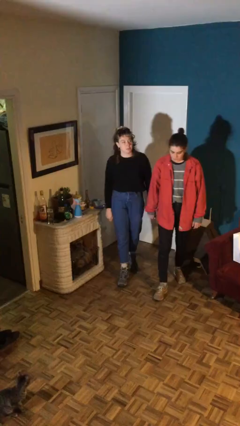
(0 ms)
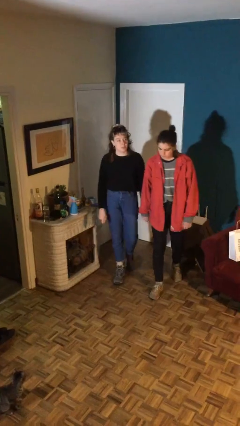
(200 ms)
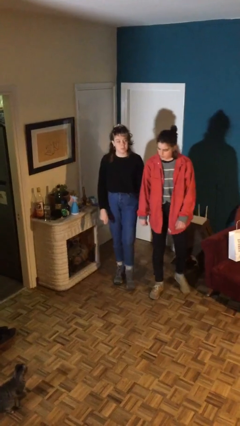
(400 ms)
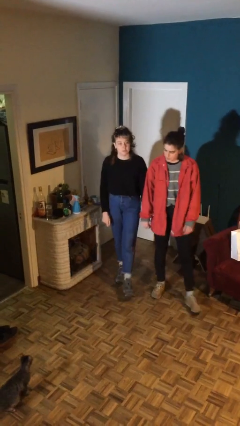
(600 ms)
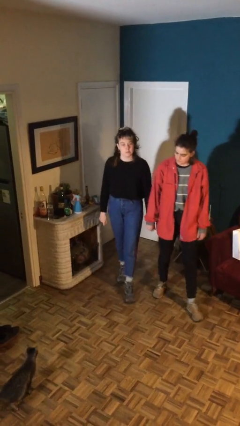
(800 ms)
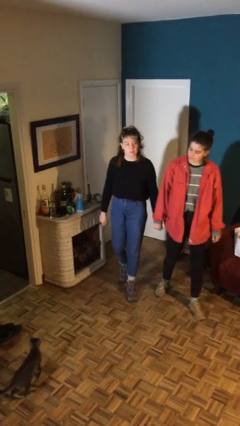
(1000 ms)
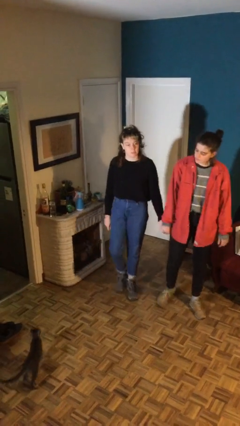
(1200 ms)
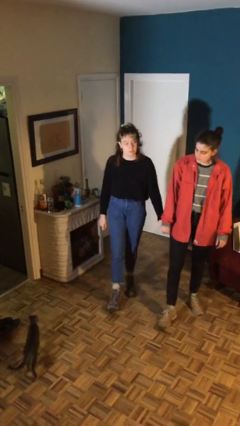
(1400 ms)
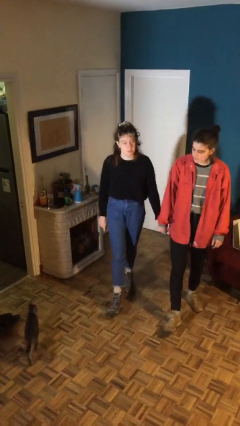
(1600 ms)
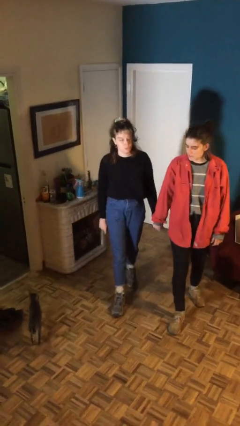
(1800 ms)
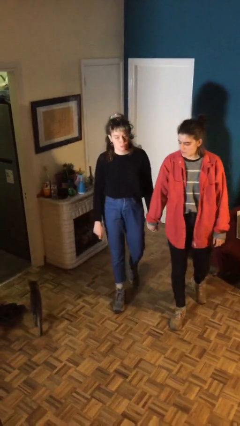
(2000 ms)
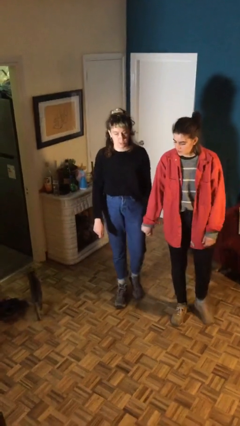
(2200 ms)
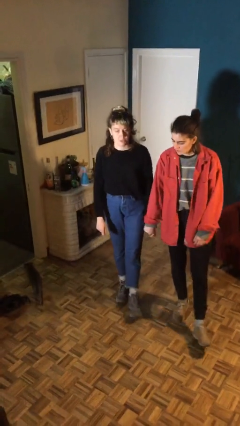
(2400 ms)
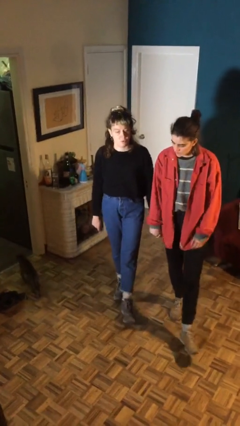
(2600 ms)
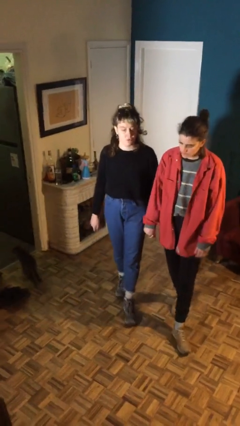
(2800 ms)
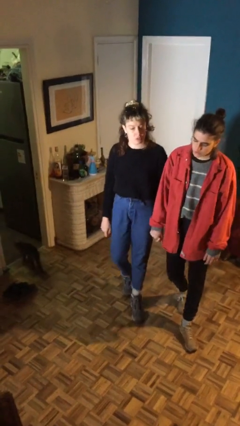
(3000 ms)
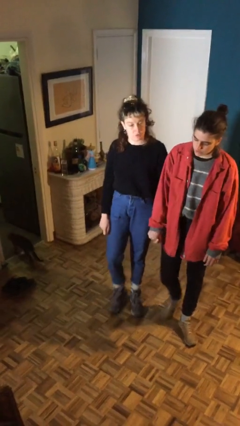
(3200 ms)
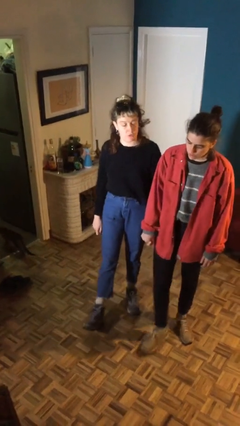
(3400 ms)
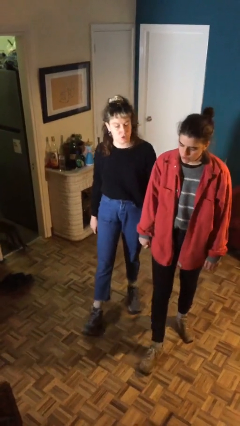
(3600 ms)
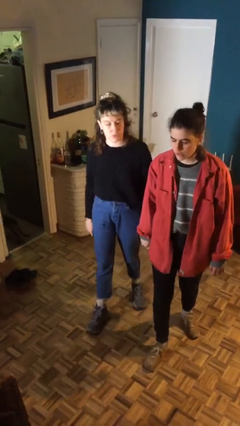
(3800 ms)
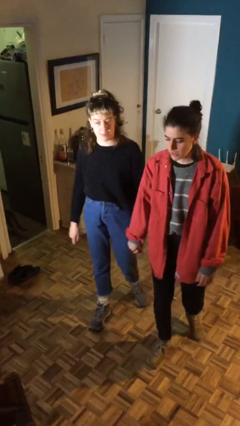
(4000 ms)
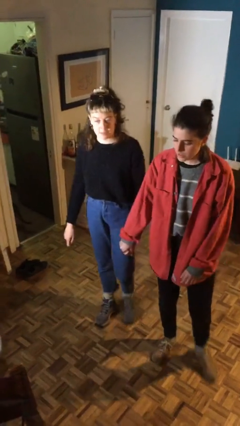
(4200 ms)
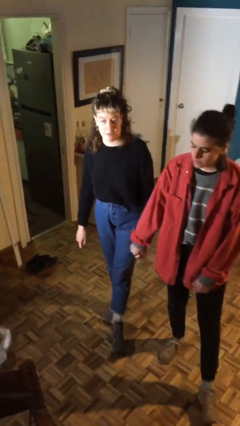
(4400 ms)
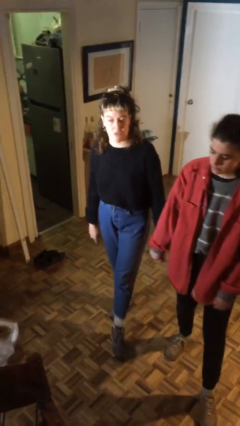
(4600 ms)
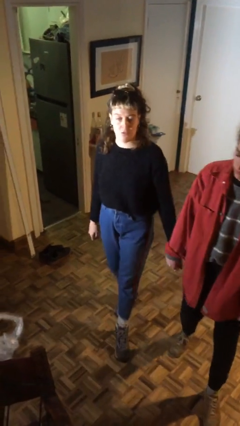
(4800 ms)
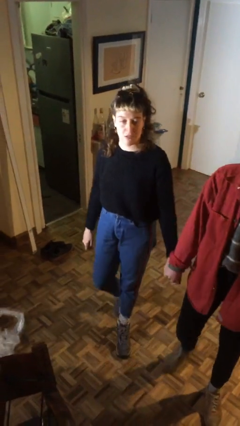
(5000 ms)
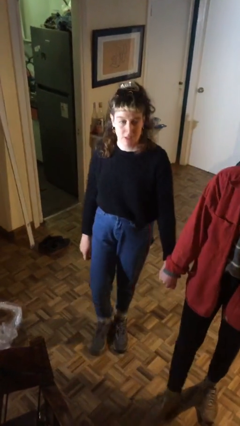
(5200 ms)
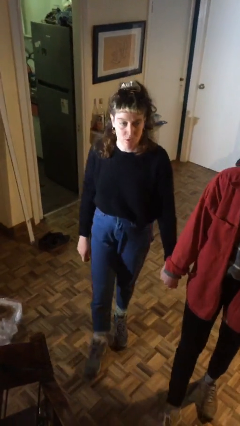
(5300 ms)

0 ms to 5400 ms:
person holds hand

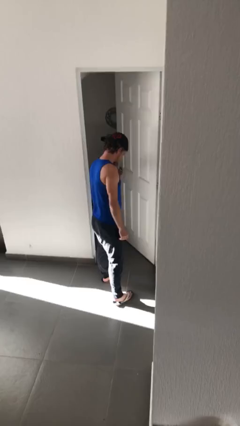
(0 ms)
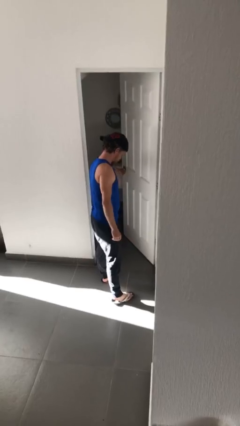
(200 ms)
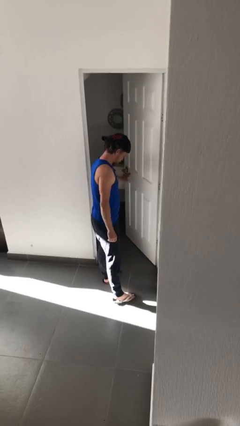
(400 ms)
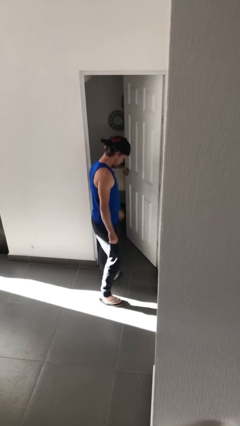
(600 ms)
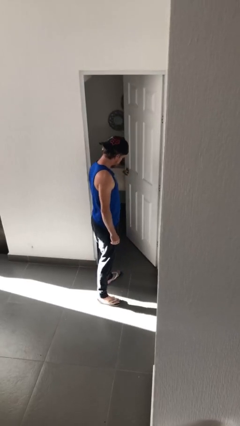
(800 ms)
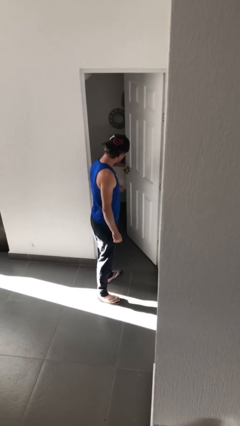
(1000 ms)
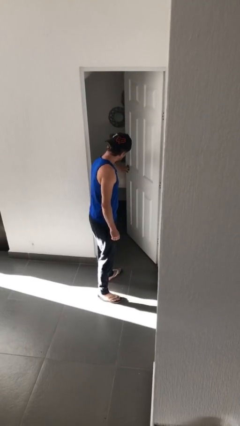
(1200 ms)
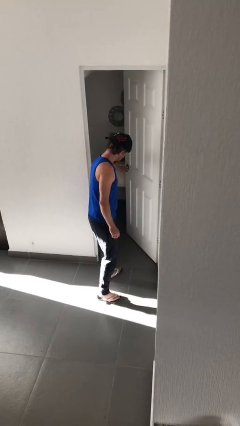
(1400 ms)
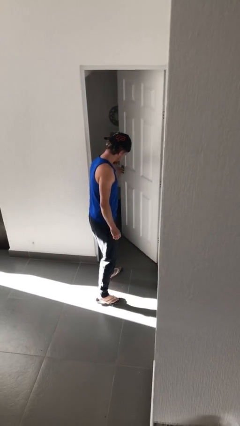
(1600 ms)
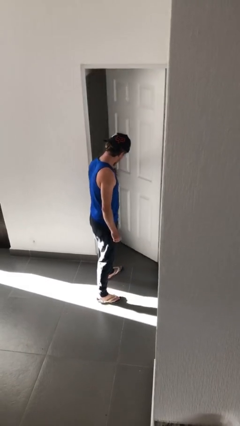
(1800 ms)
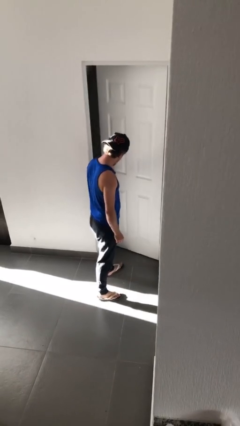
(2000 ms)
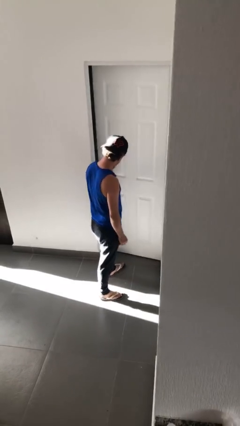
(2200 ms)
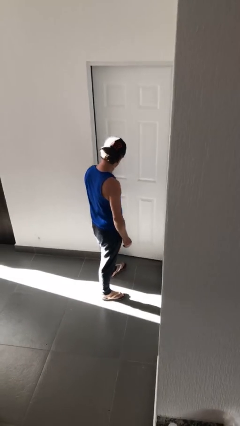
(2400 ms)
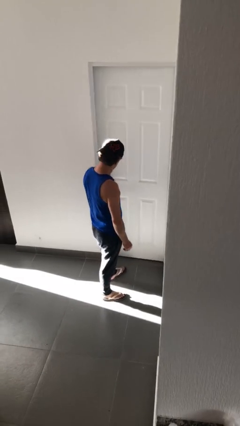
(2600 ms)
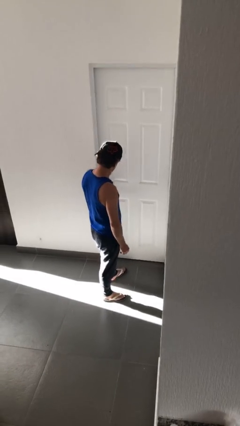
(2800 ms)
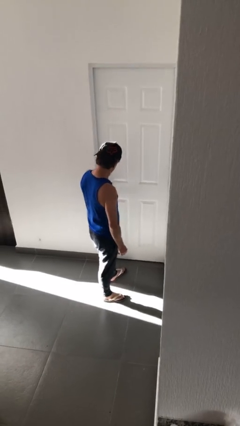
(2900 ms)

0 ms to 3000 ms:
person closes facility door

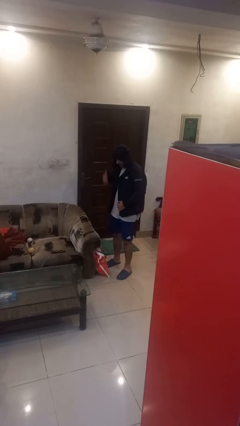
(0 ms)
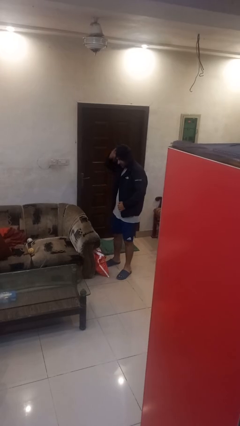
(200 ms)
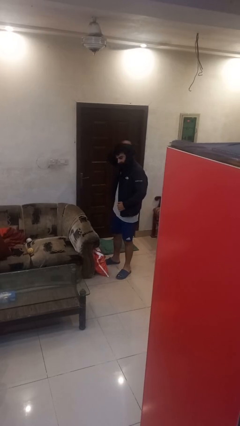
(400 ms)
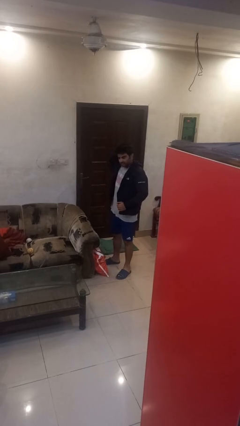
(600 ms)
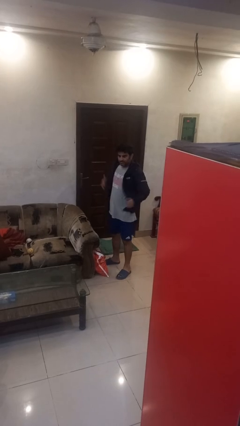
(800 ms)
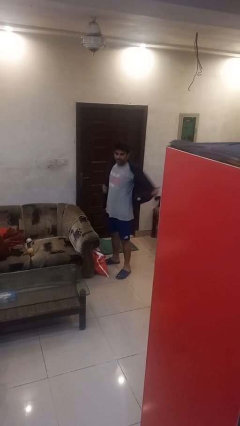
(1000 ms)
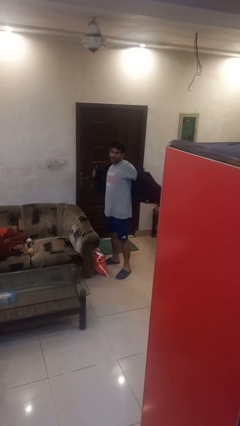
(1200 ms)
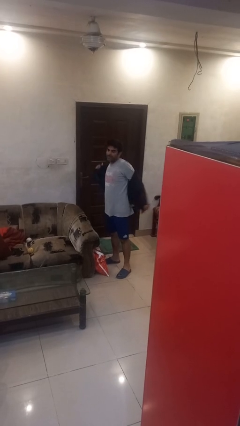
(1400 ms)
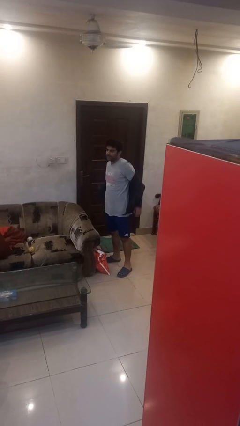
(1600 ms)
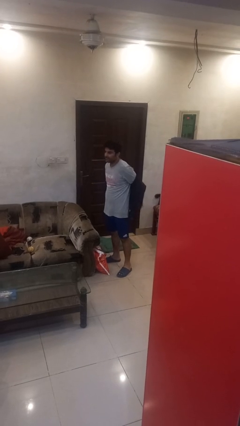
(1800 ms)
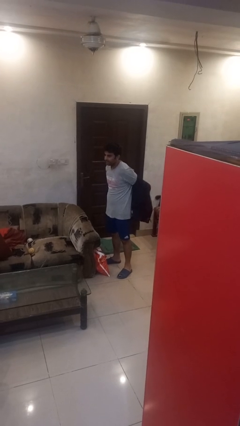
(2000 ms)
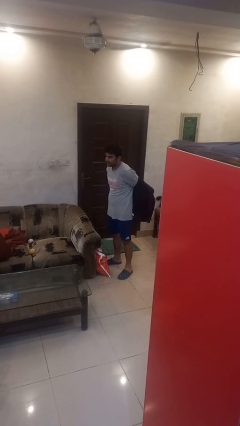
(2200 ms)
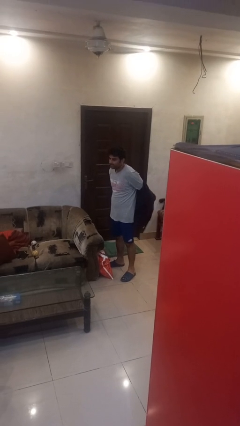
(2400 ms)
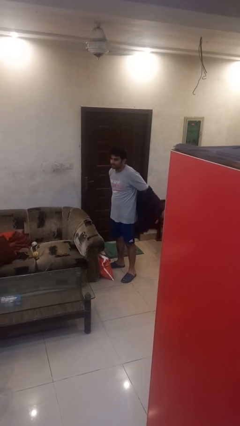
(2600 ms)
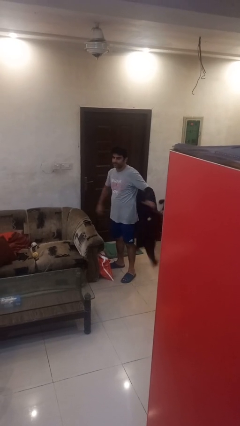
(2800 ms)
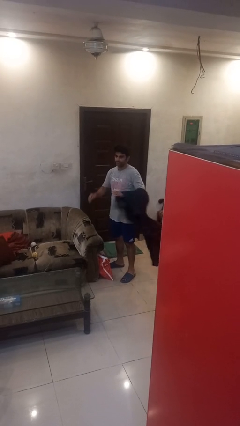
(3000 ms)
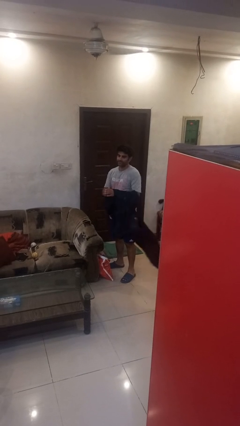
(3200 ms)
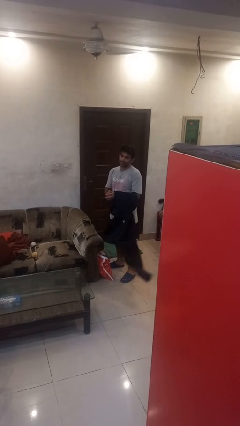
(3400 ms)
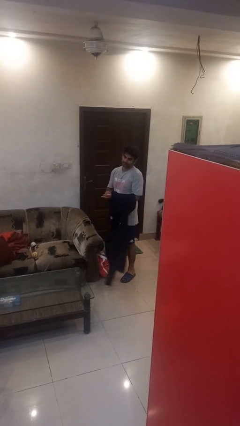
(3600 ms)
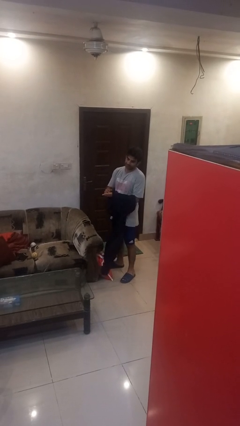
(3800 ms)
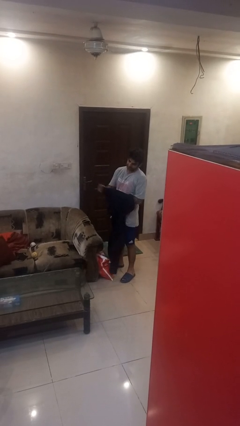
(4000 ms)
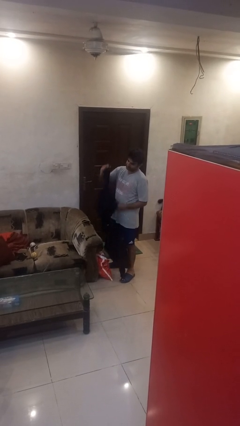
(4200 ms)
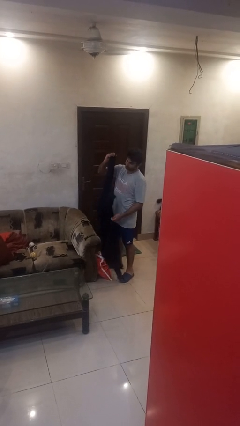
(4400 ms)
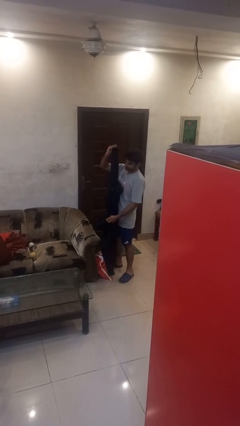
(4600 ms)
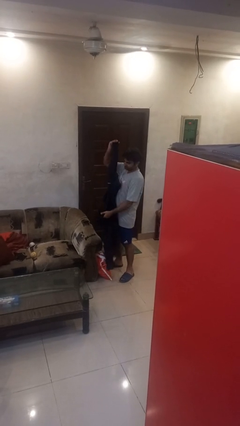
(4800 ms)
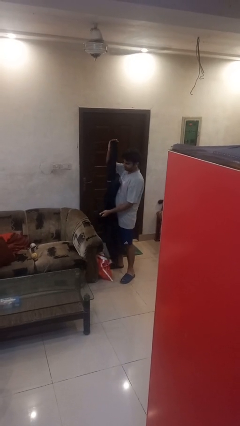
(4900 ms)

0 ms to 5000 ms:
person takes off hoodie

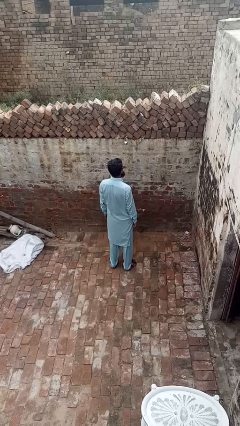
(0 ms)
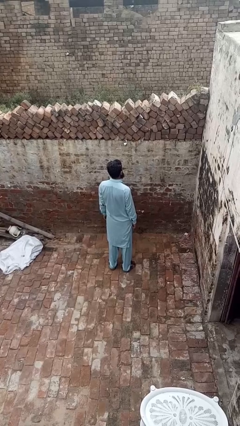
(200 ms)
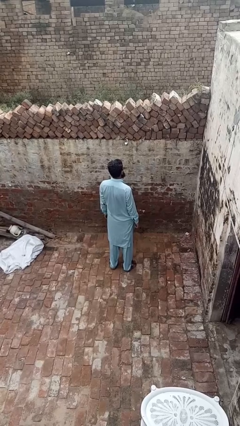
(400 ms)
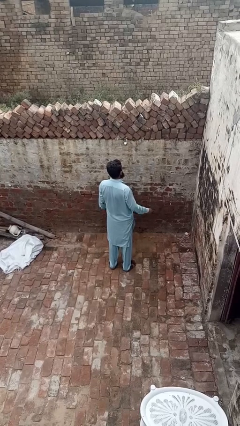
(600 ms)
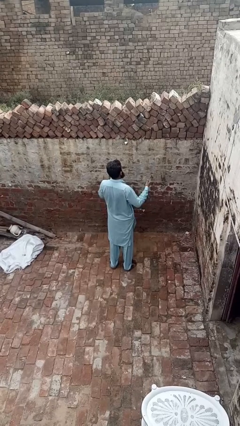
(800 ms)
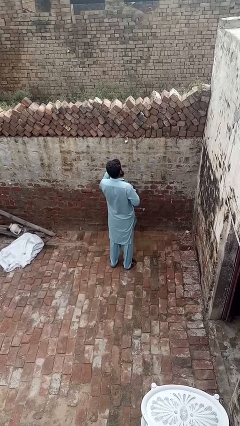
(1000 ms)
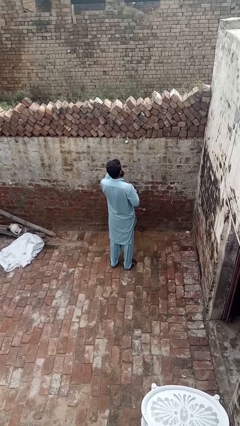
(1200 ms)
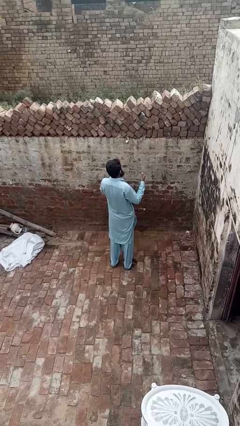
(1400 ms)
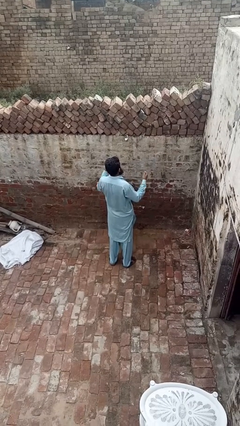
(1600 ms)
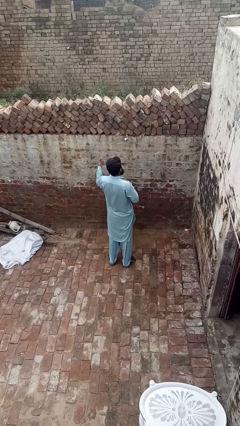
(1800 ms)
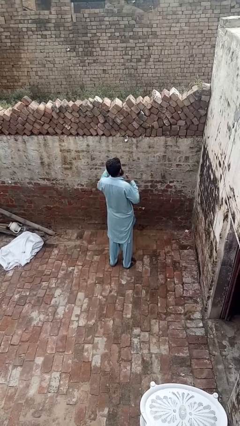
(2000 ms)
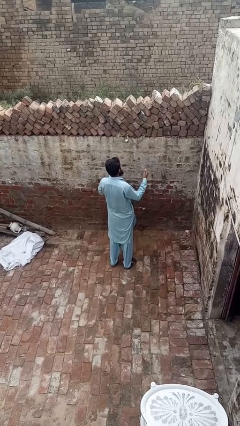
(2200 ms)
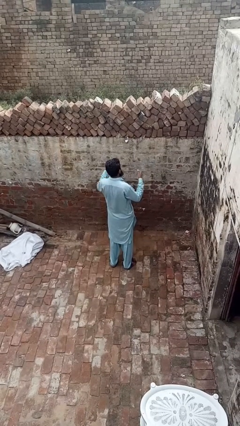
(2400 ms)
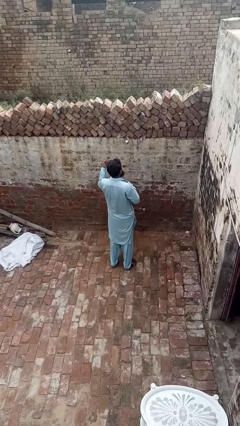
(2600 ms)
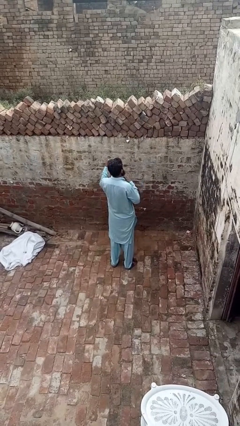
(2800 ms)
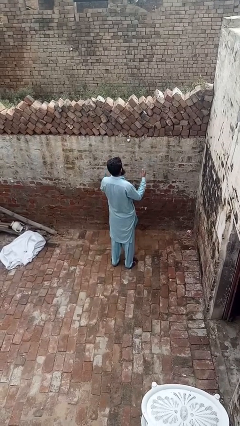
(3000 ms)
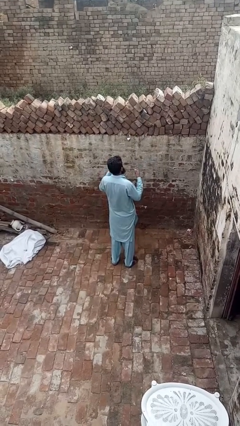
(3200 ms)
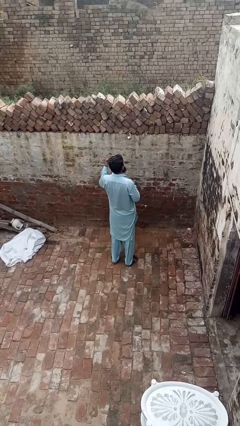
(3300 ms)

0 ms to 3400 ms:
person drums on chest

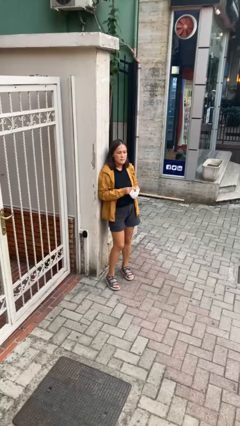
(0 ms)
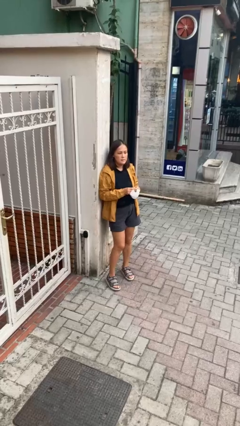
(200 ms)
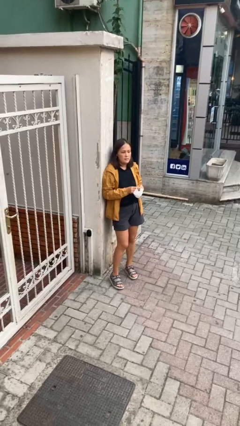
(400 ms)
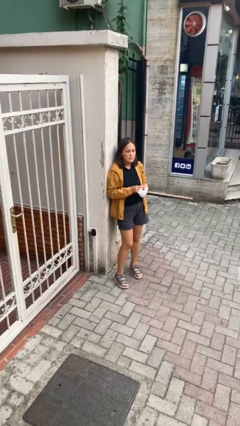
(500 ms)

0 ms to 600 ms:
person puts on facemask

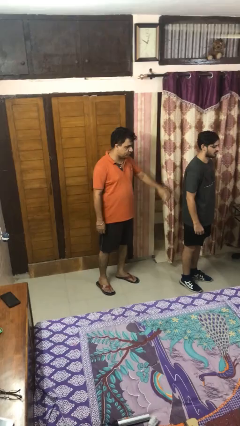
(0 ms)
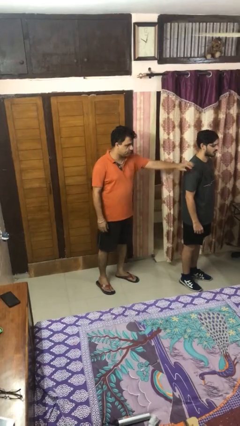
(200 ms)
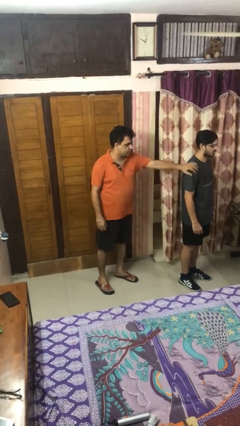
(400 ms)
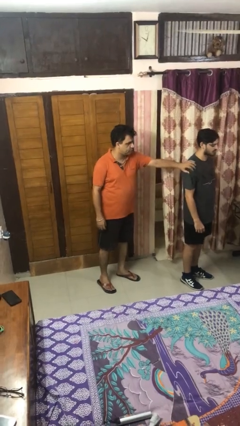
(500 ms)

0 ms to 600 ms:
person grabs person by shoulder
